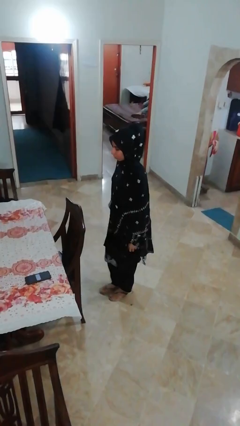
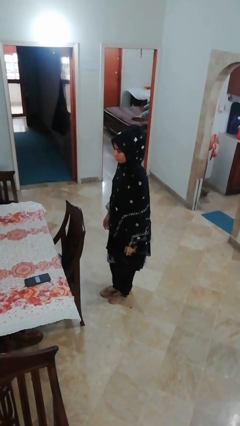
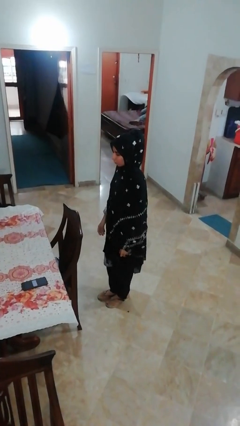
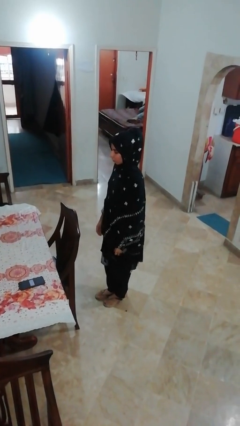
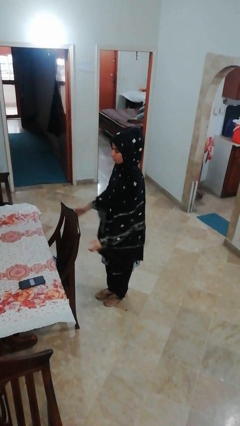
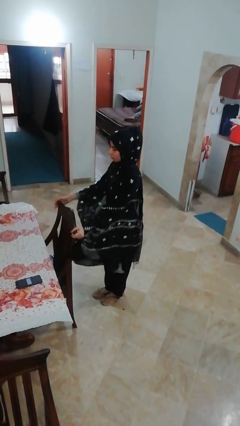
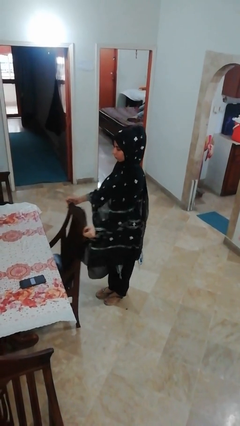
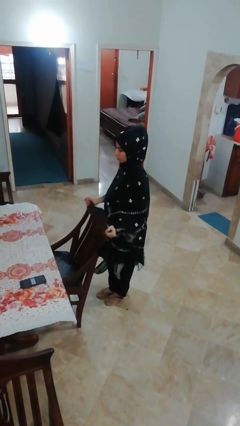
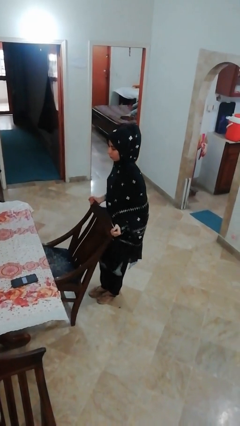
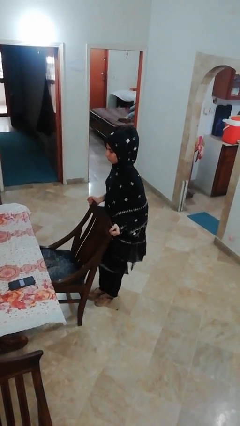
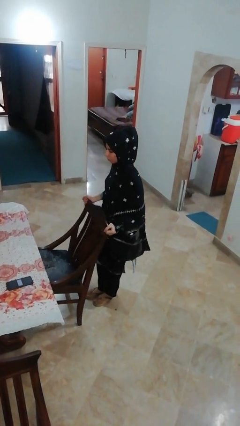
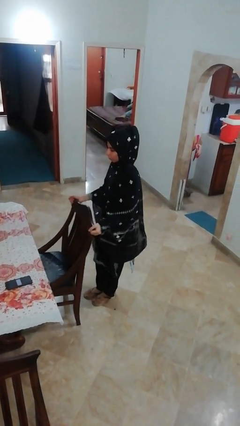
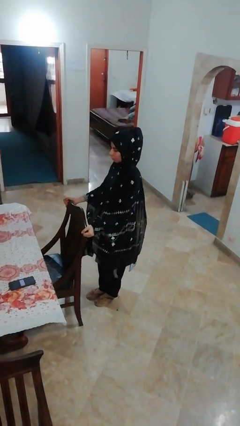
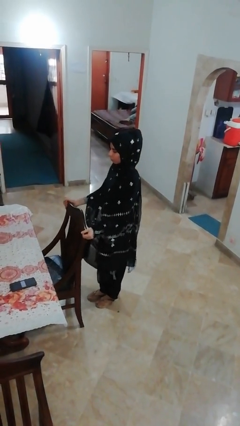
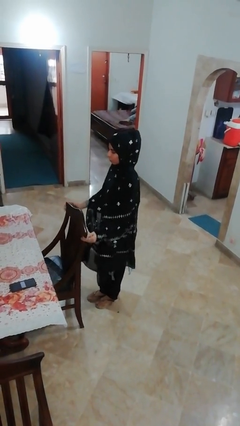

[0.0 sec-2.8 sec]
person pulls out chair

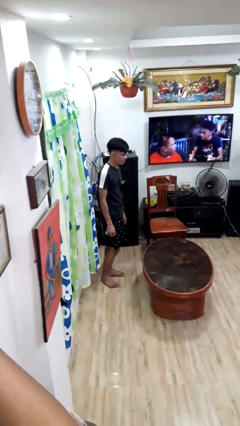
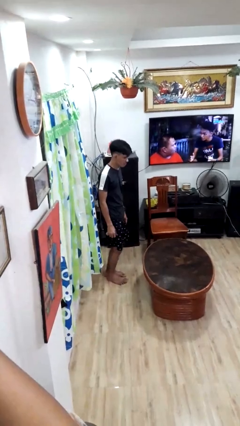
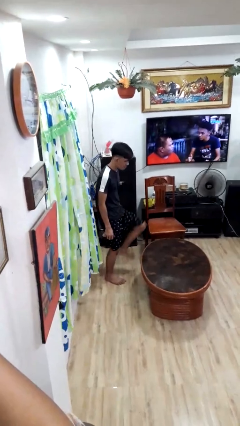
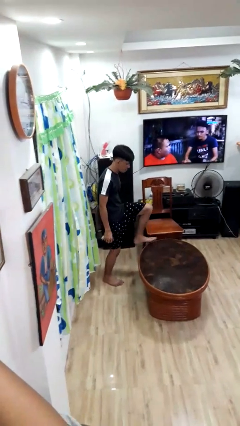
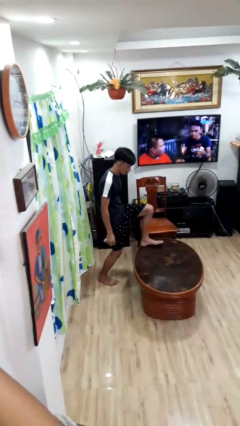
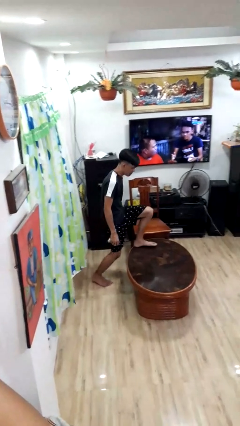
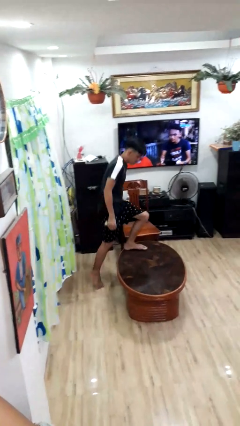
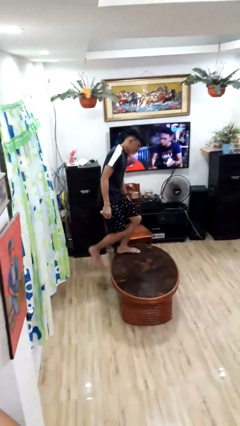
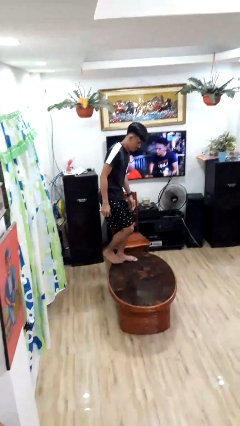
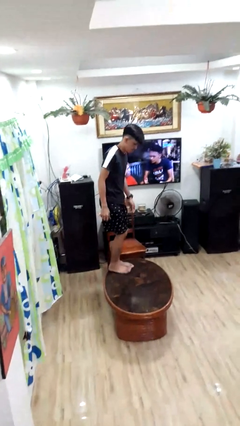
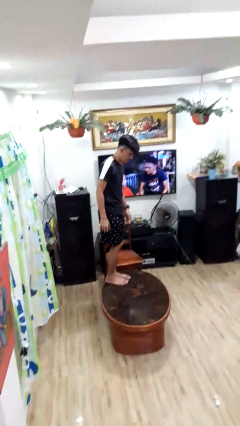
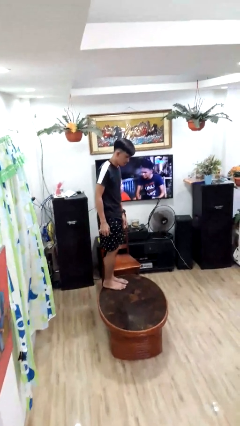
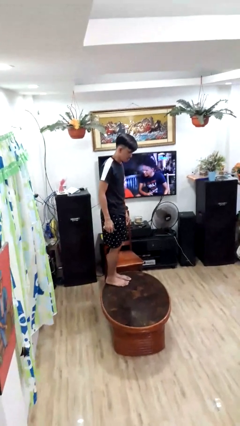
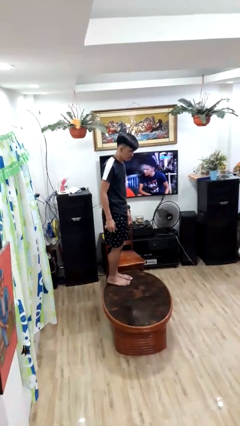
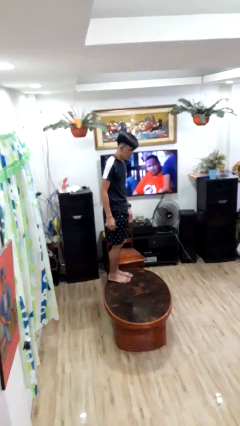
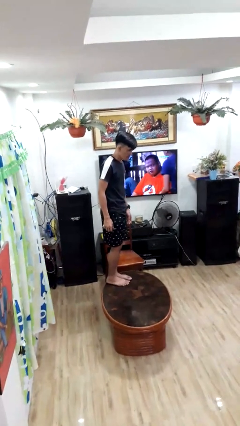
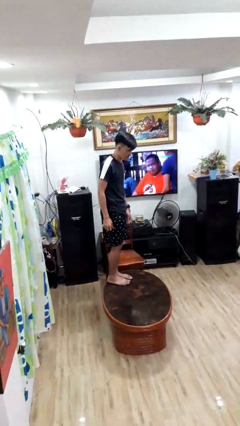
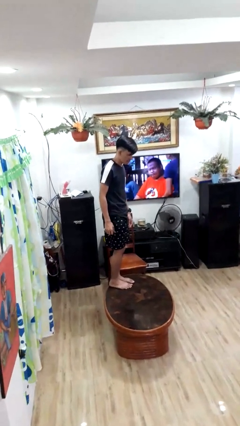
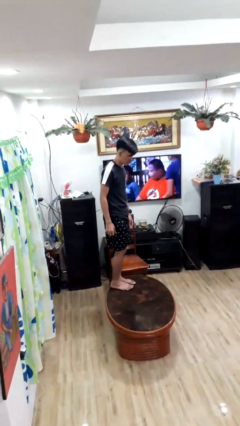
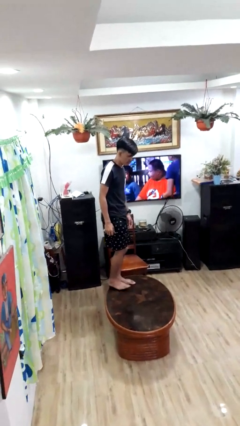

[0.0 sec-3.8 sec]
person climbs on table

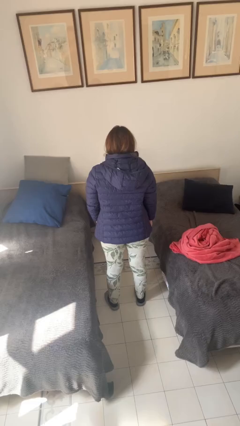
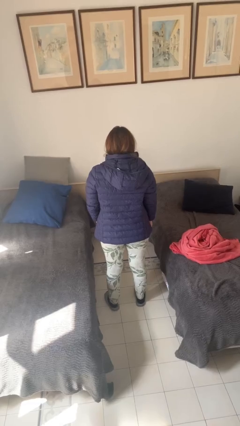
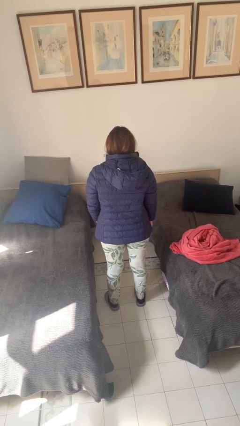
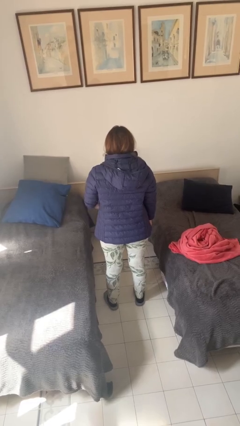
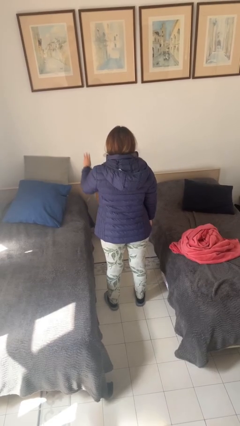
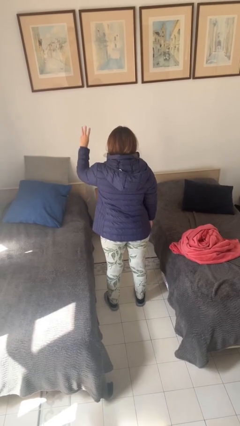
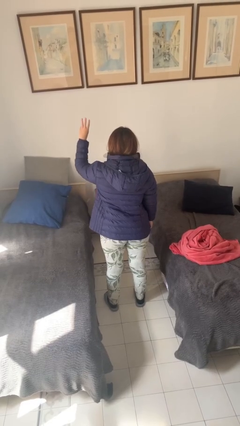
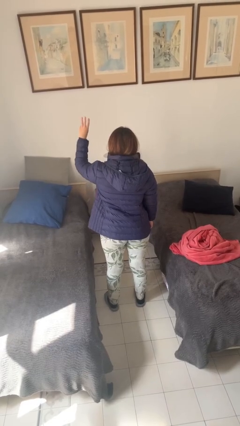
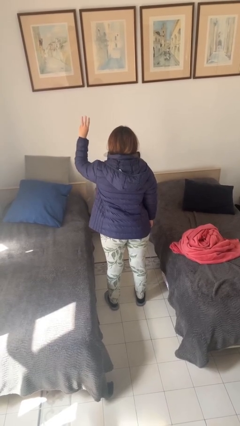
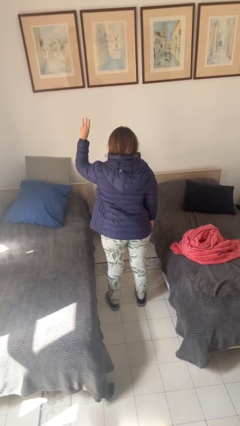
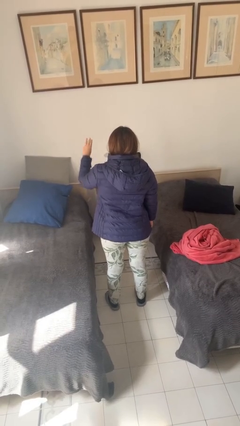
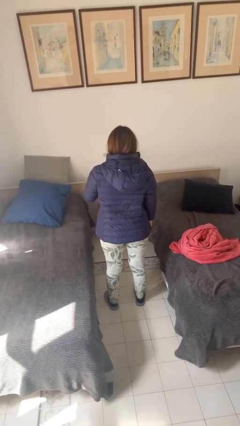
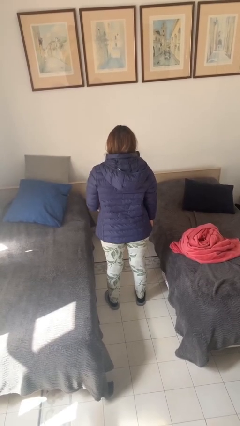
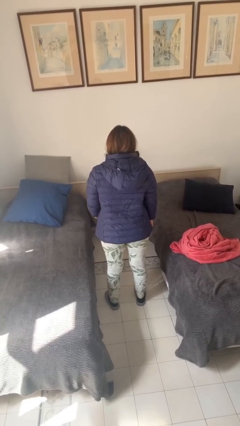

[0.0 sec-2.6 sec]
person gestures number three

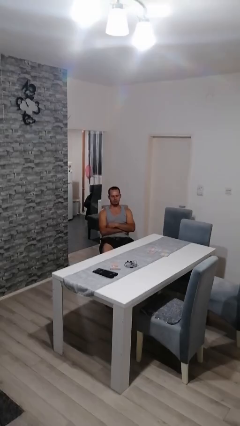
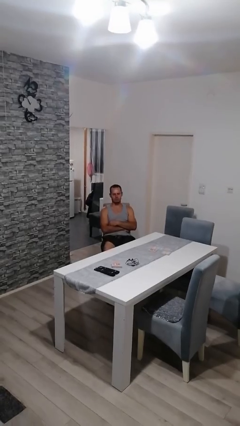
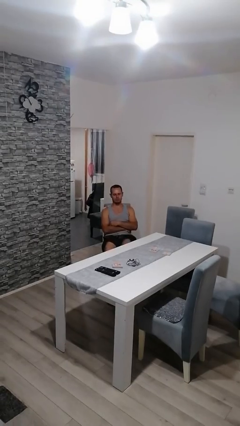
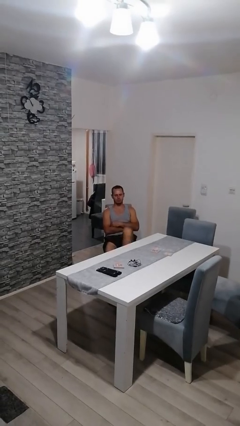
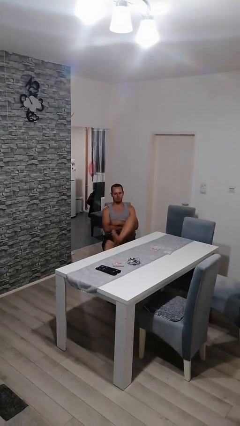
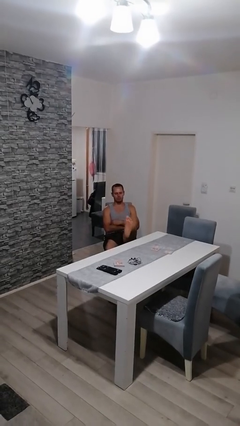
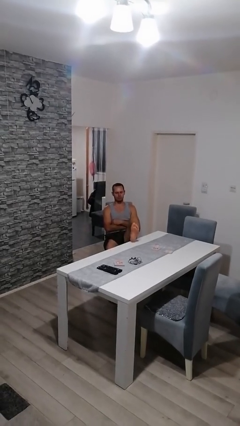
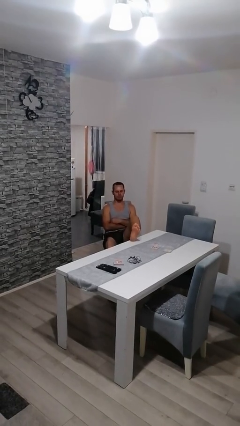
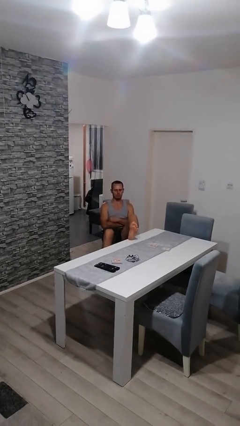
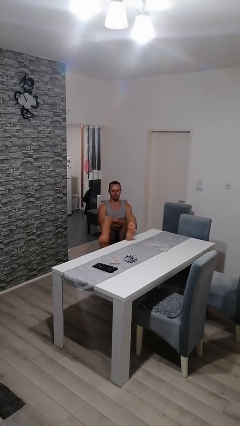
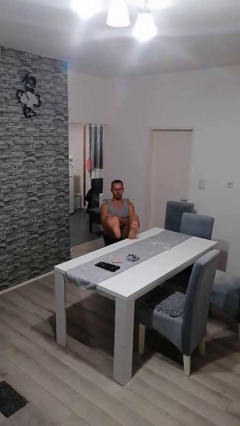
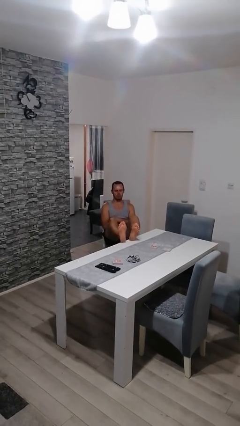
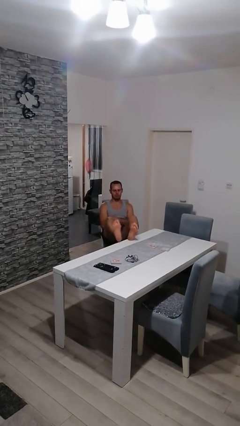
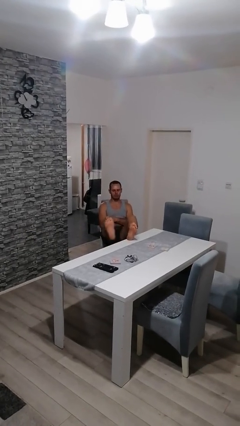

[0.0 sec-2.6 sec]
person puts feet up

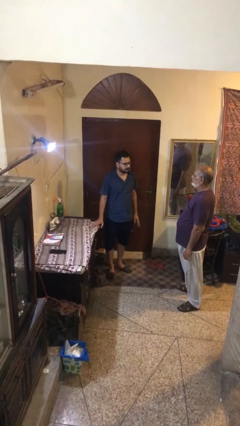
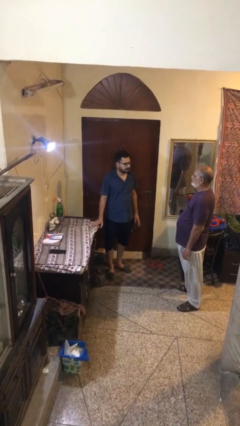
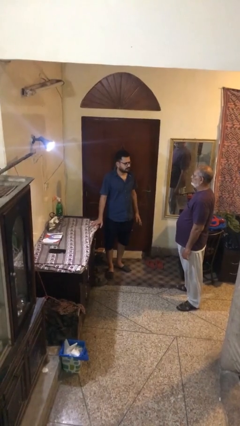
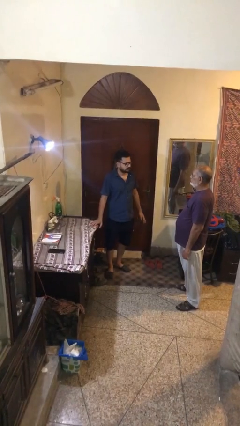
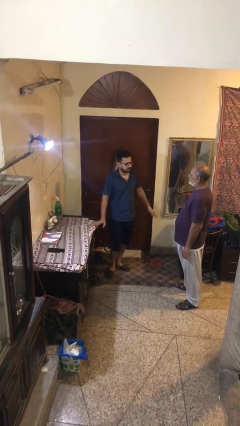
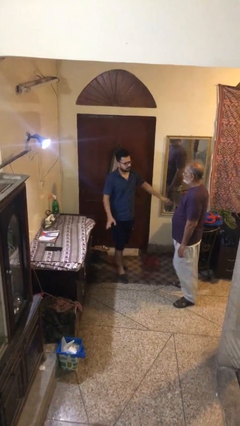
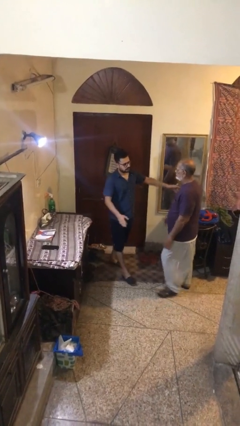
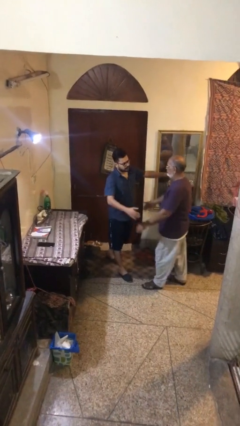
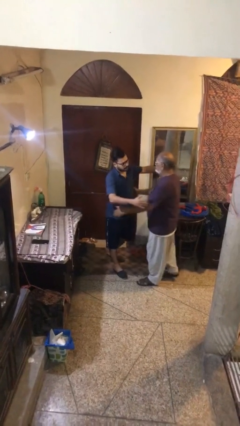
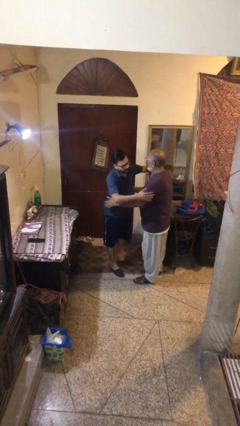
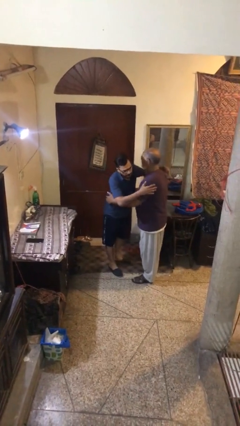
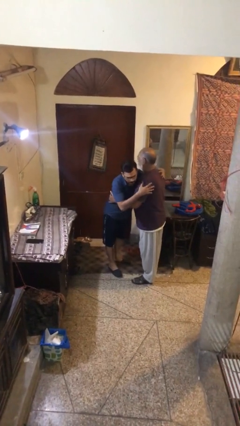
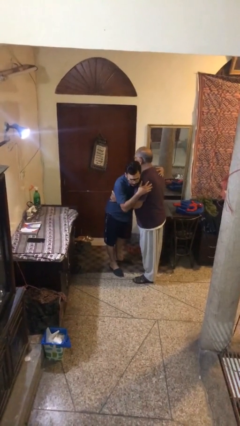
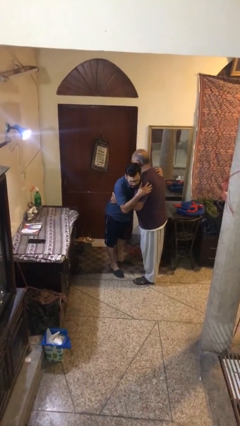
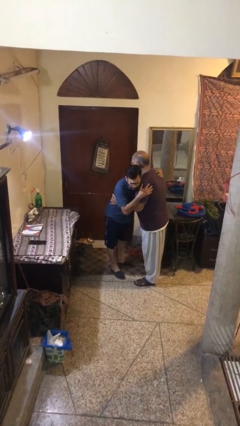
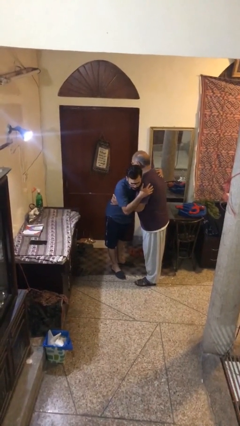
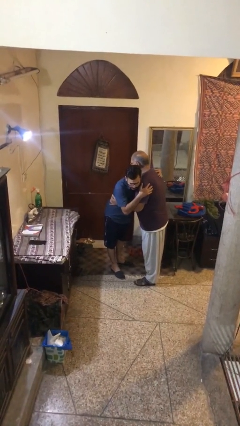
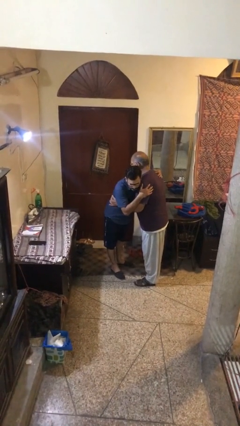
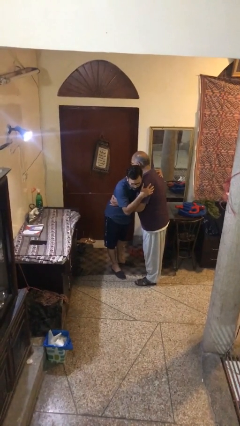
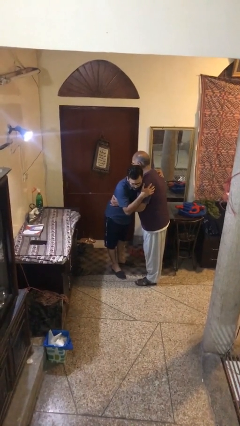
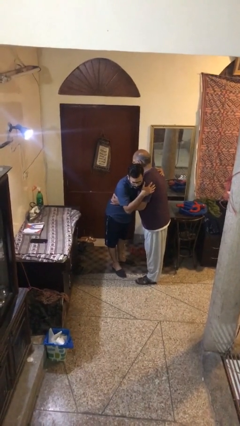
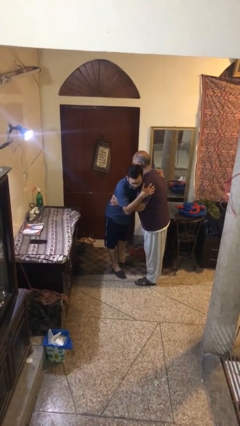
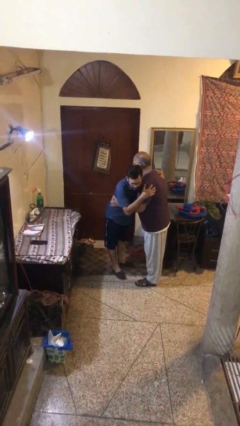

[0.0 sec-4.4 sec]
person embraces person

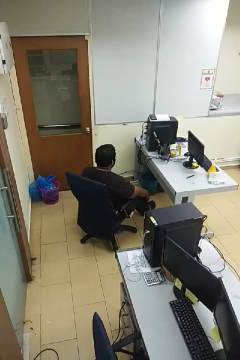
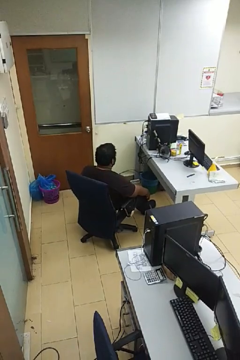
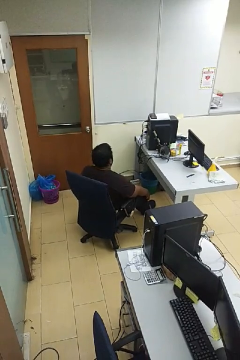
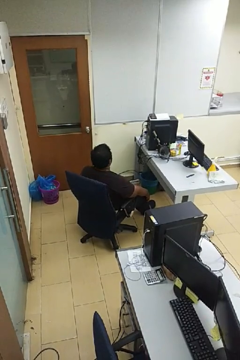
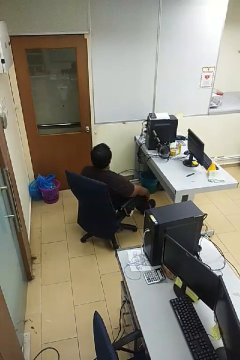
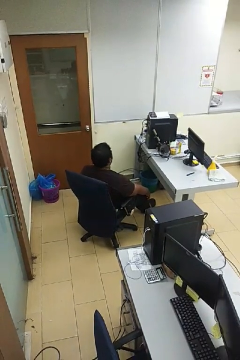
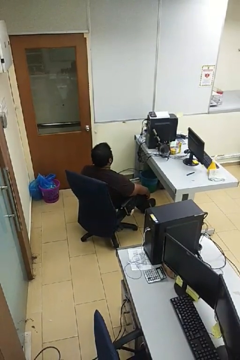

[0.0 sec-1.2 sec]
person shakes head

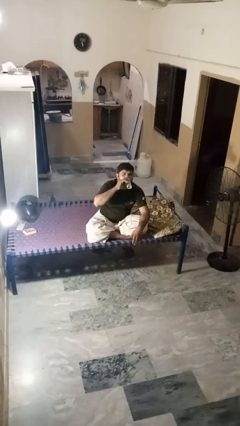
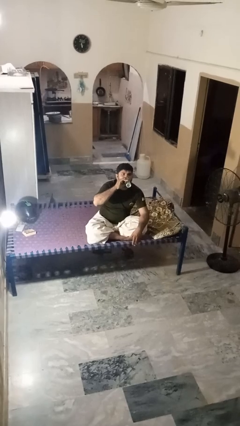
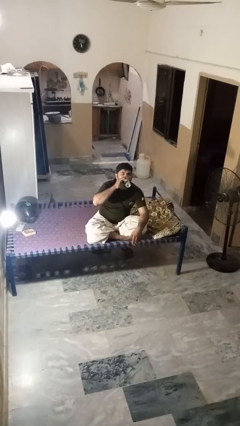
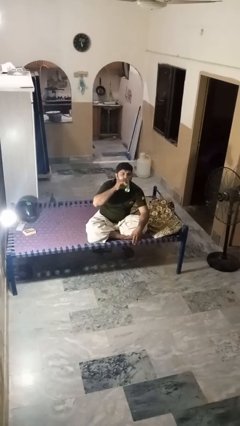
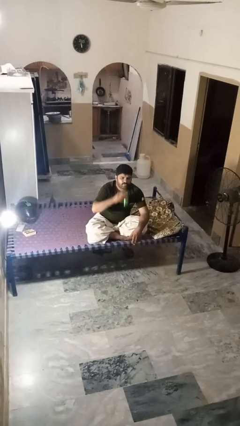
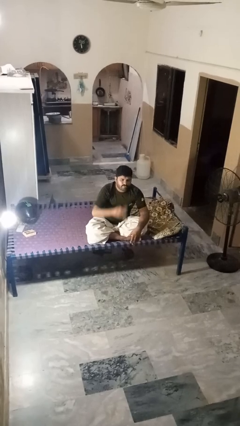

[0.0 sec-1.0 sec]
person drinks from beverage can
